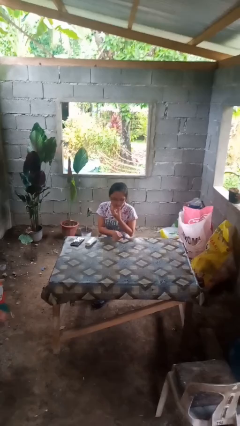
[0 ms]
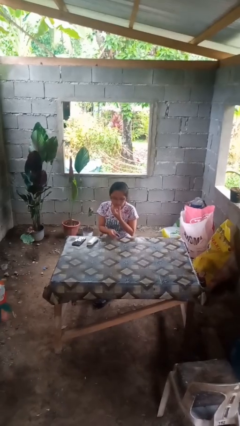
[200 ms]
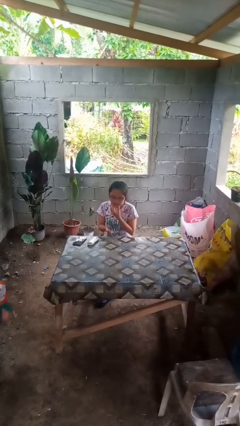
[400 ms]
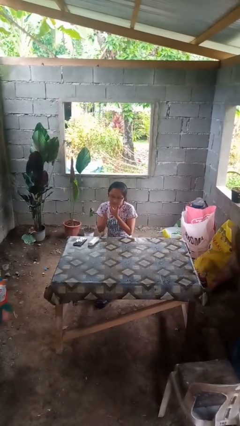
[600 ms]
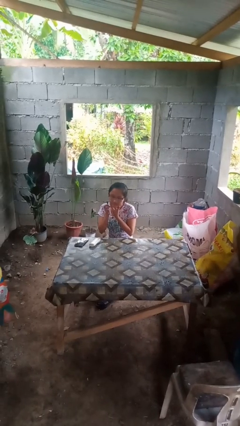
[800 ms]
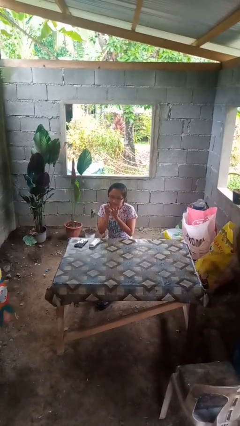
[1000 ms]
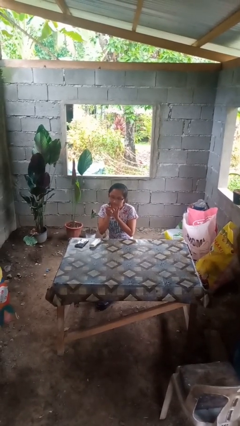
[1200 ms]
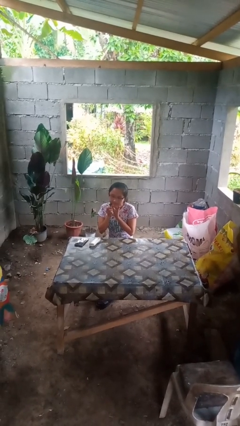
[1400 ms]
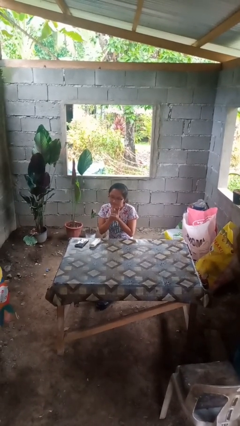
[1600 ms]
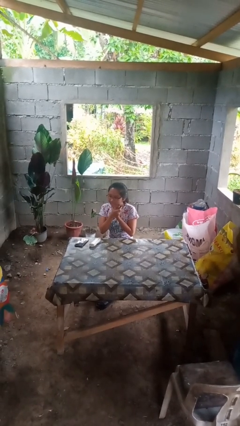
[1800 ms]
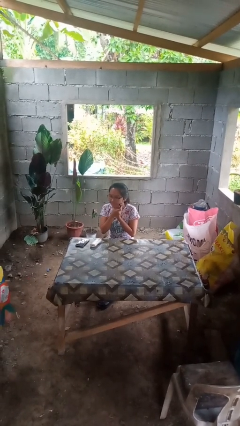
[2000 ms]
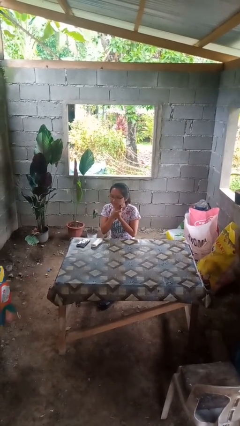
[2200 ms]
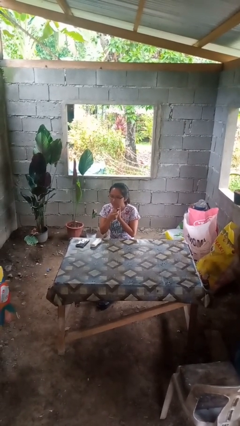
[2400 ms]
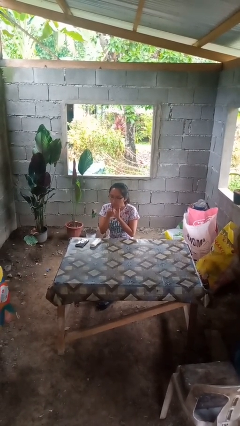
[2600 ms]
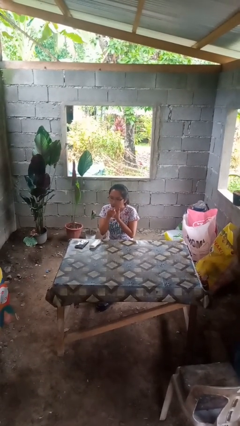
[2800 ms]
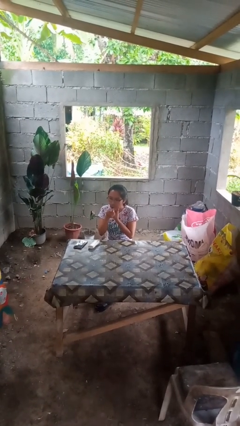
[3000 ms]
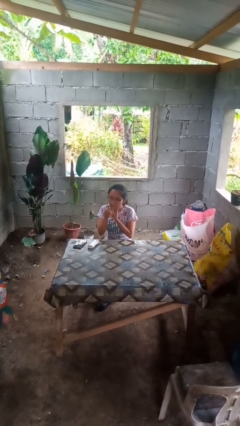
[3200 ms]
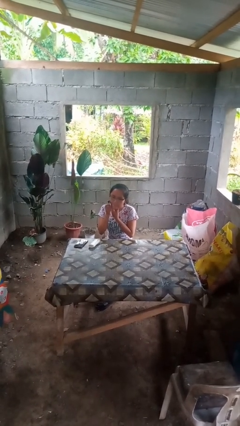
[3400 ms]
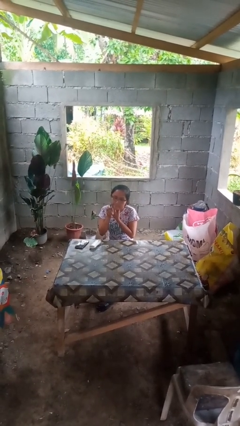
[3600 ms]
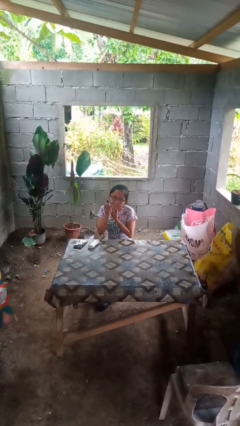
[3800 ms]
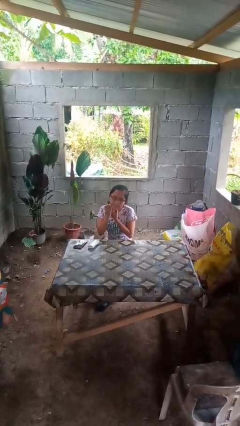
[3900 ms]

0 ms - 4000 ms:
person shaves face

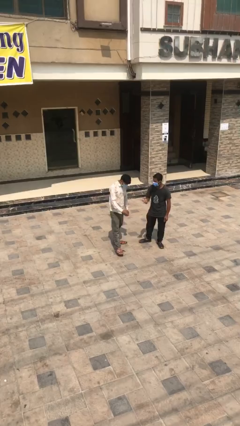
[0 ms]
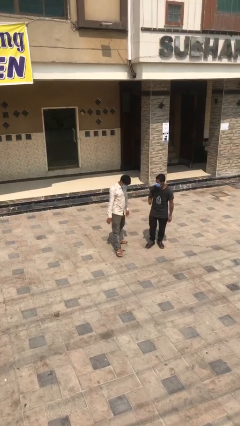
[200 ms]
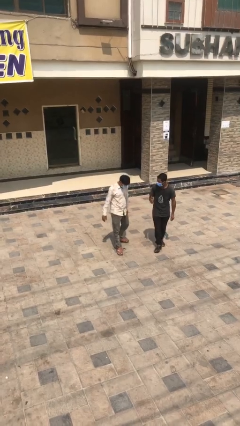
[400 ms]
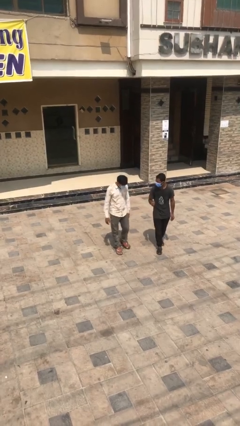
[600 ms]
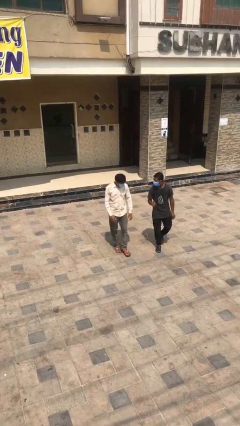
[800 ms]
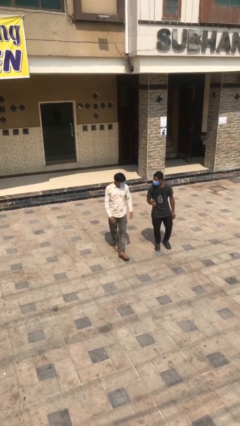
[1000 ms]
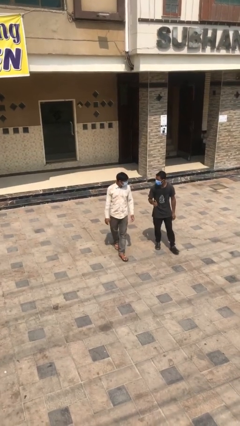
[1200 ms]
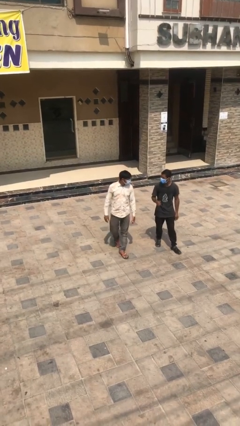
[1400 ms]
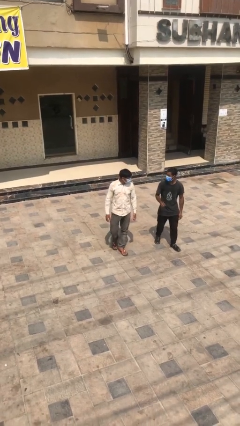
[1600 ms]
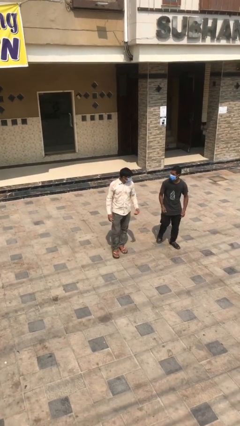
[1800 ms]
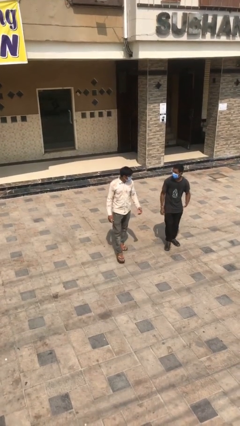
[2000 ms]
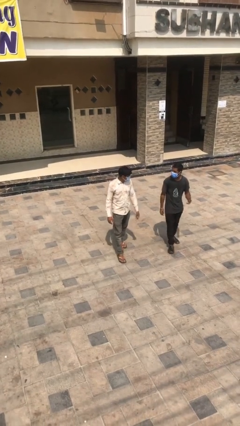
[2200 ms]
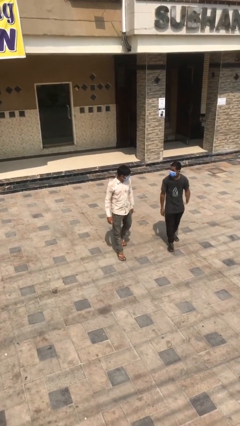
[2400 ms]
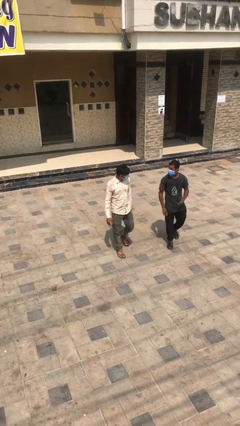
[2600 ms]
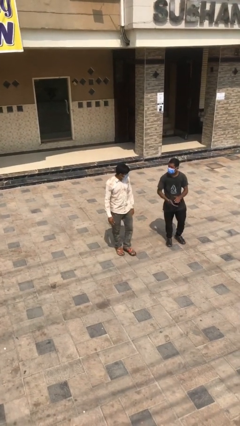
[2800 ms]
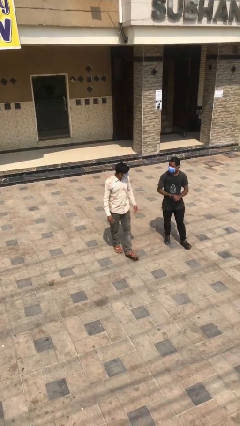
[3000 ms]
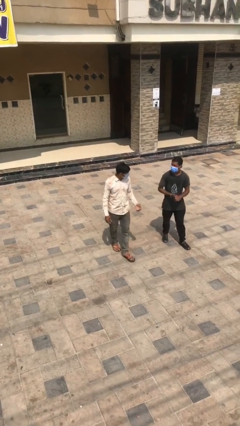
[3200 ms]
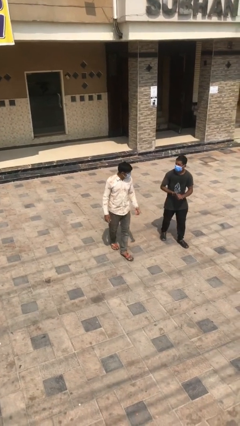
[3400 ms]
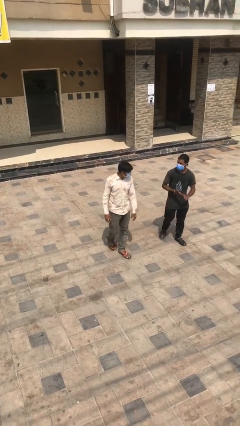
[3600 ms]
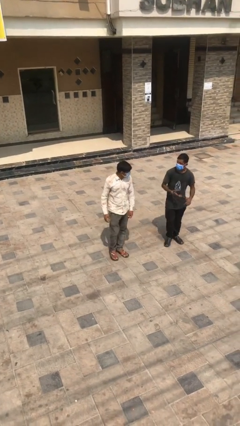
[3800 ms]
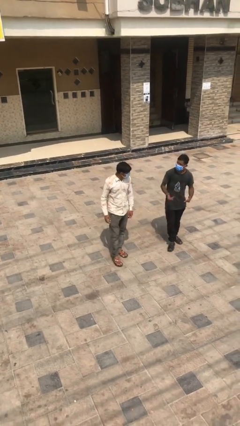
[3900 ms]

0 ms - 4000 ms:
person talks to person

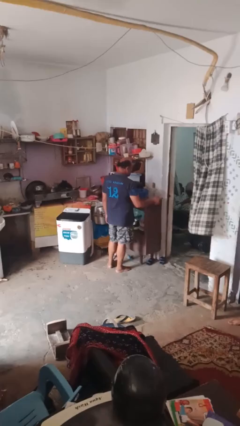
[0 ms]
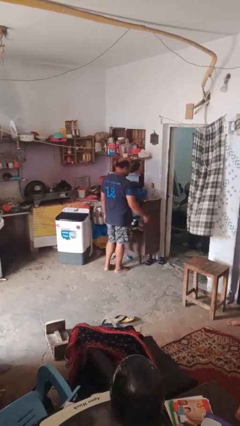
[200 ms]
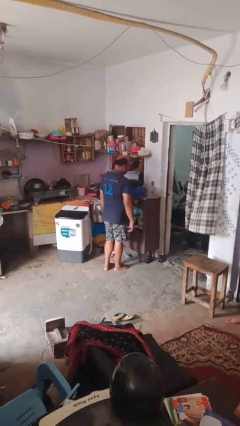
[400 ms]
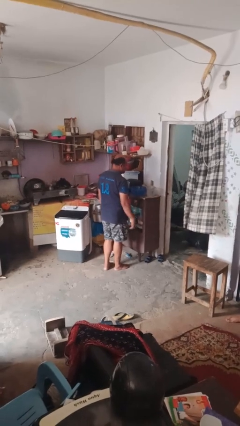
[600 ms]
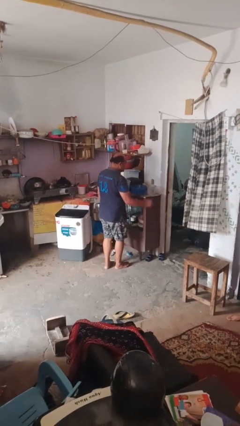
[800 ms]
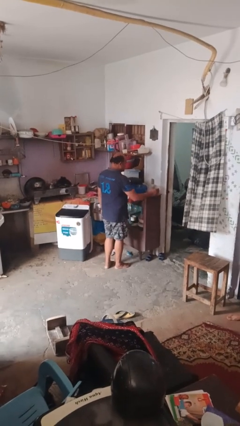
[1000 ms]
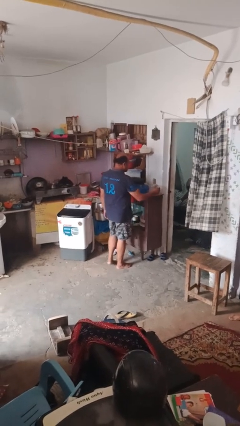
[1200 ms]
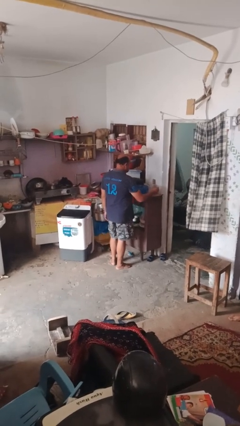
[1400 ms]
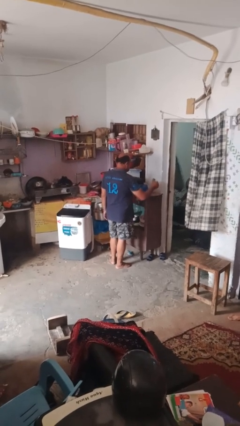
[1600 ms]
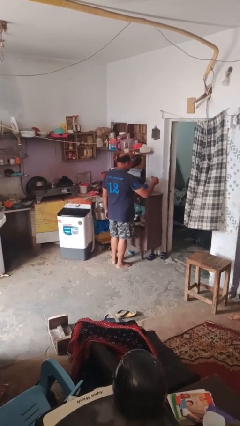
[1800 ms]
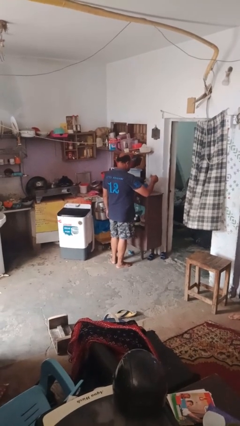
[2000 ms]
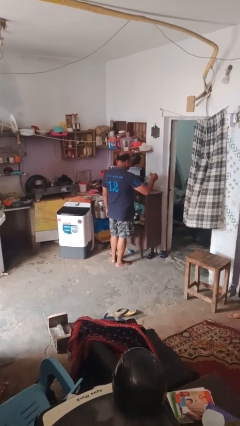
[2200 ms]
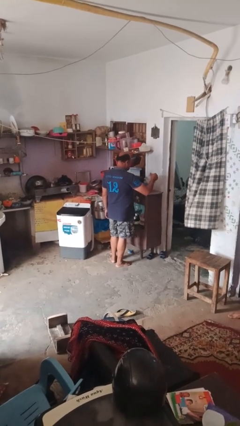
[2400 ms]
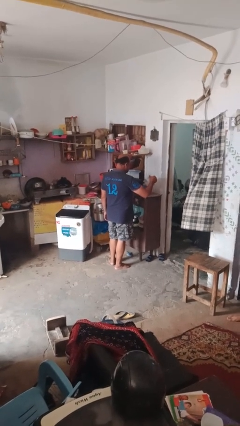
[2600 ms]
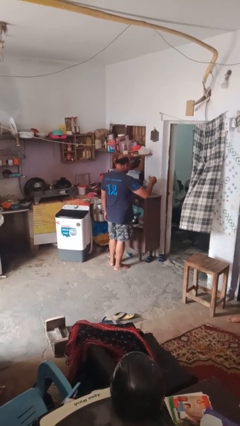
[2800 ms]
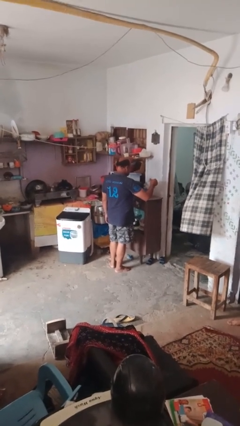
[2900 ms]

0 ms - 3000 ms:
person pours into bowl

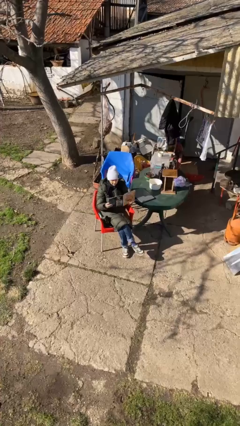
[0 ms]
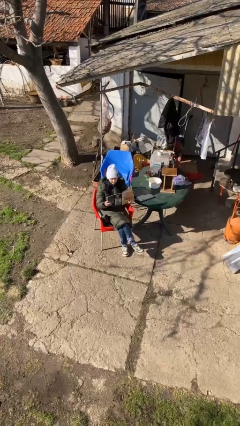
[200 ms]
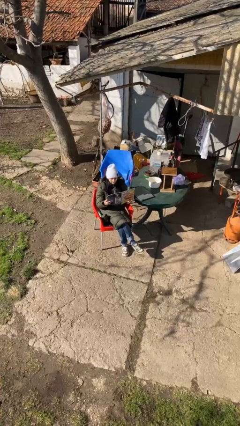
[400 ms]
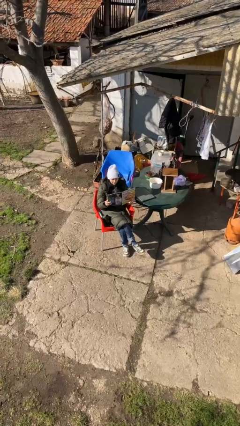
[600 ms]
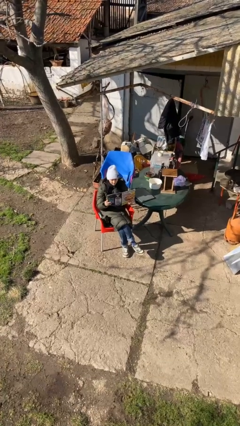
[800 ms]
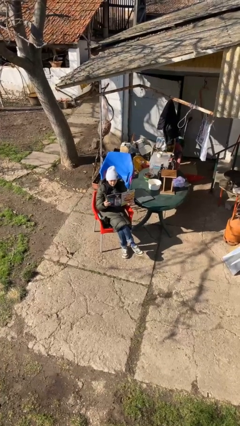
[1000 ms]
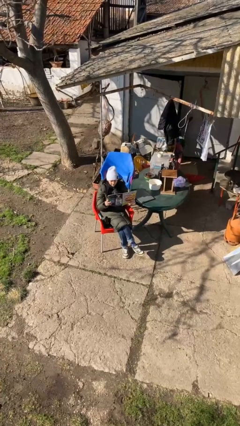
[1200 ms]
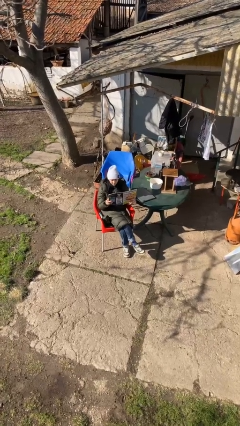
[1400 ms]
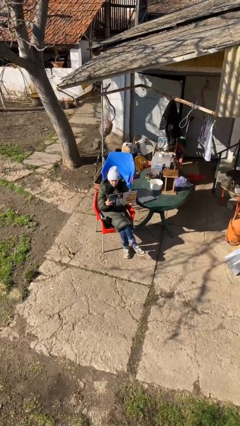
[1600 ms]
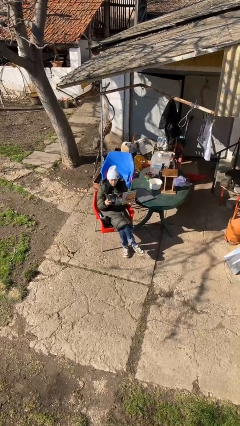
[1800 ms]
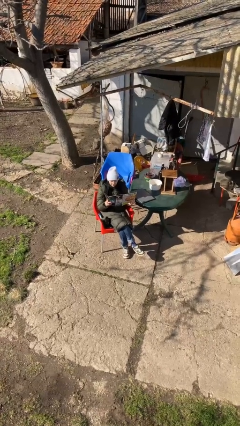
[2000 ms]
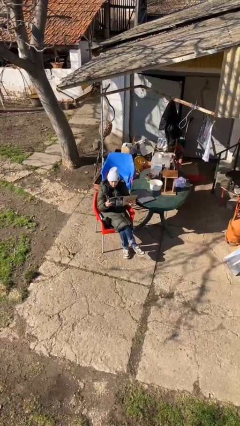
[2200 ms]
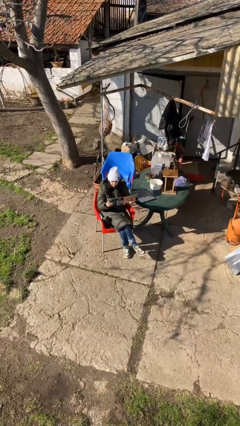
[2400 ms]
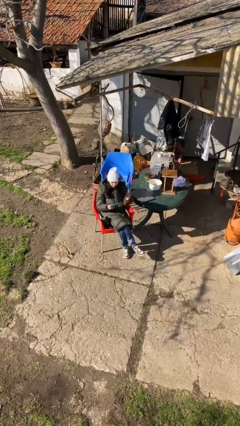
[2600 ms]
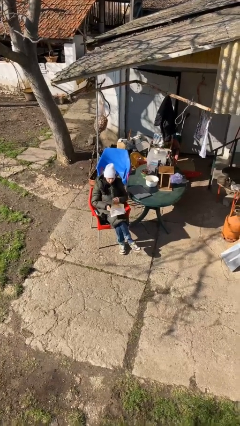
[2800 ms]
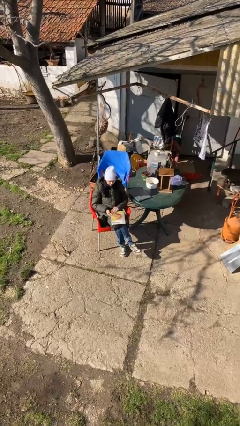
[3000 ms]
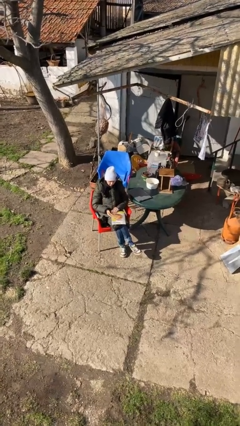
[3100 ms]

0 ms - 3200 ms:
person reads document

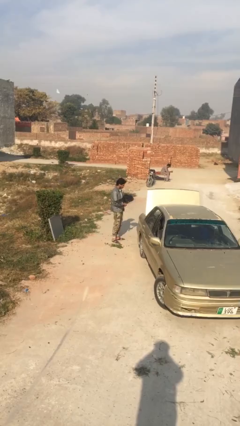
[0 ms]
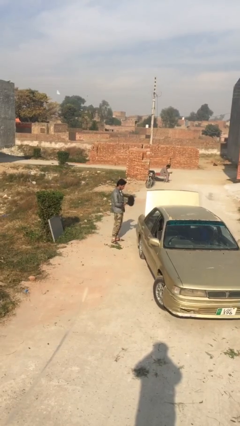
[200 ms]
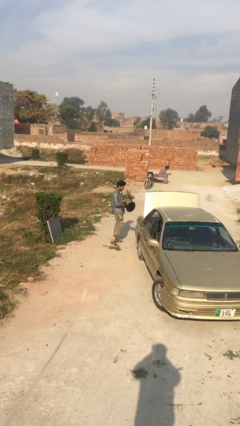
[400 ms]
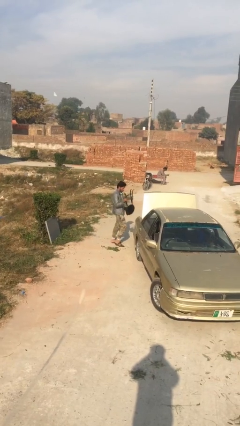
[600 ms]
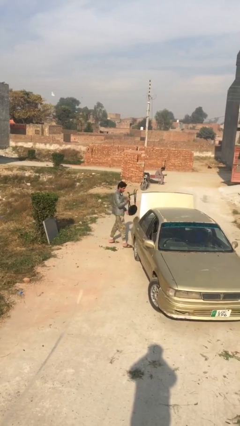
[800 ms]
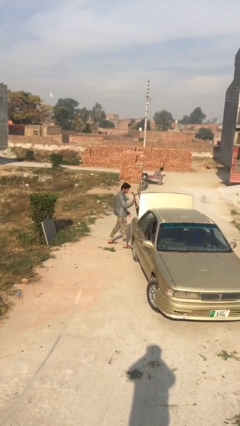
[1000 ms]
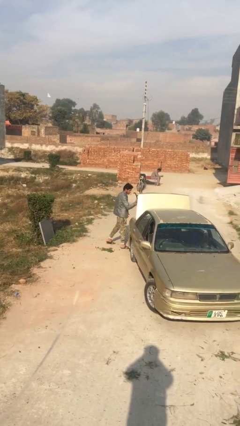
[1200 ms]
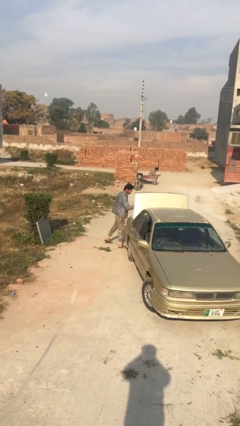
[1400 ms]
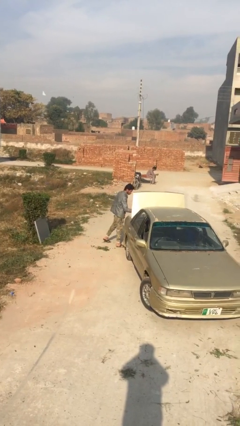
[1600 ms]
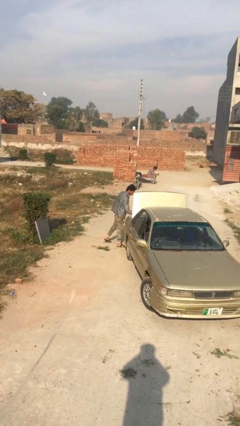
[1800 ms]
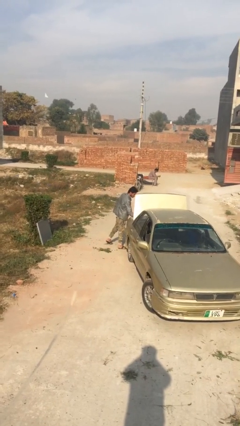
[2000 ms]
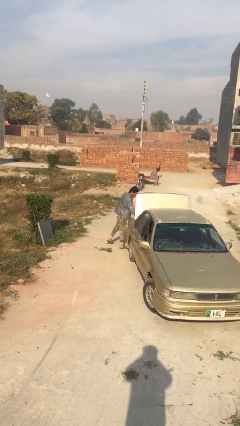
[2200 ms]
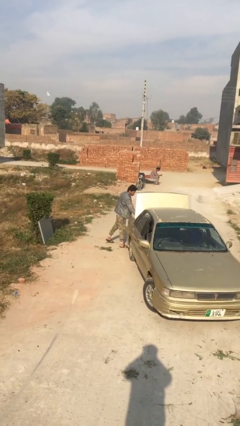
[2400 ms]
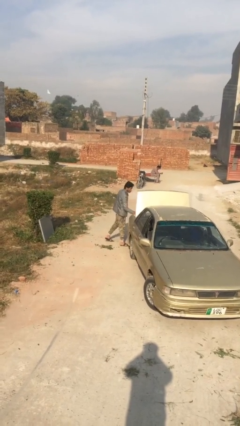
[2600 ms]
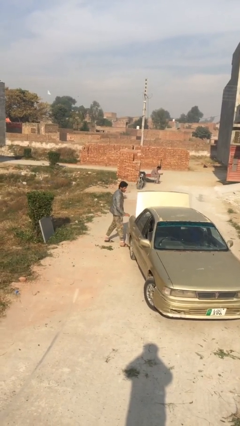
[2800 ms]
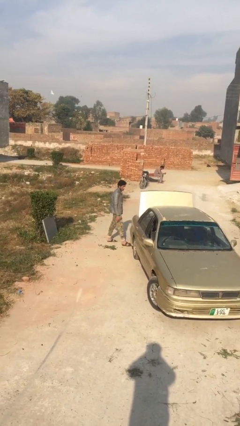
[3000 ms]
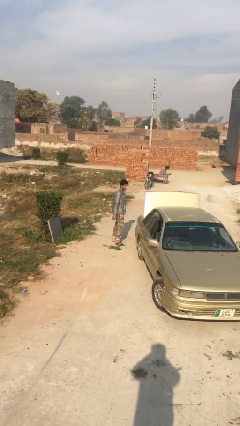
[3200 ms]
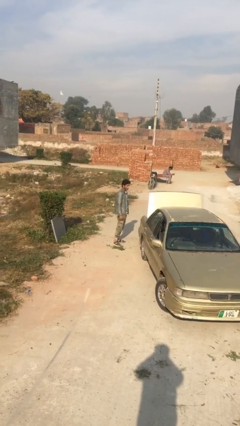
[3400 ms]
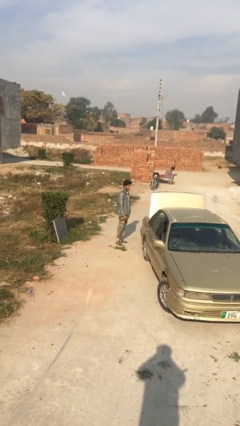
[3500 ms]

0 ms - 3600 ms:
person loads car
